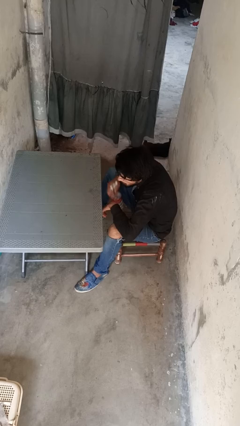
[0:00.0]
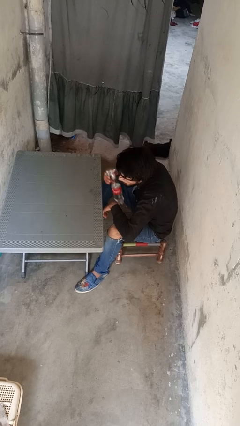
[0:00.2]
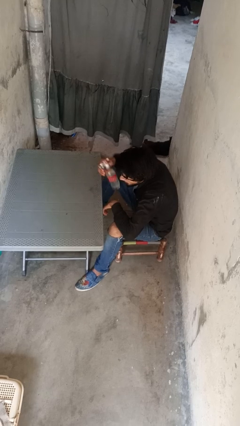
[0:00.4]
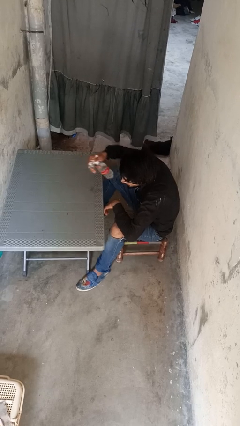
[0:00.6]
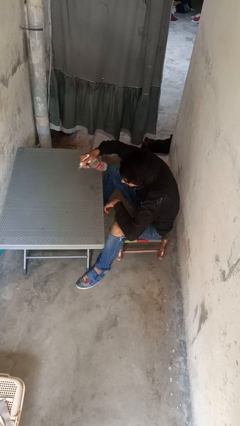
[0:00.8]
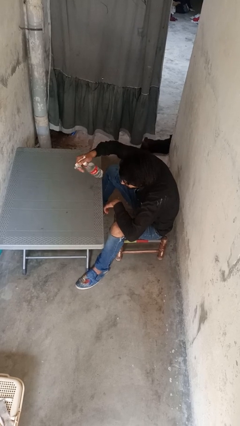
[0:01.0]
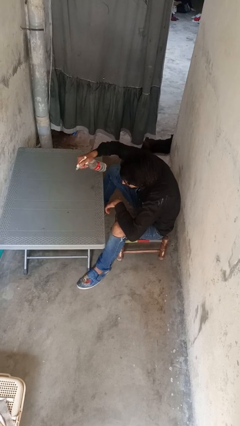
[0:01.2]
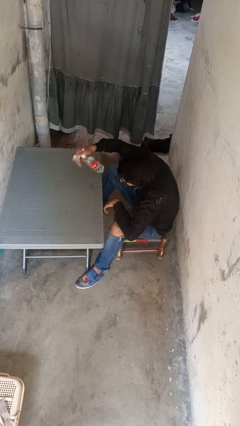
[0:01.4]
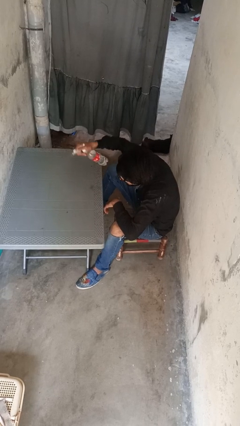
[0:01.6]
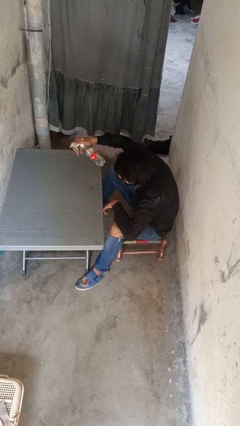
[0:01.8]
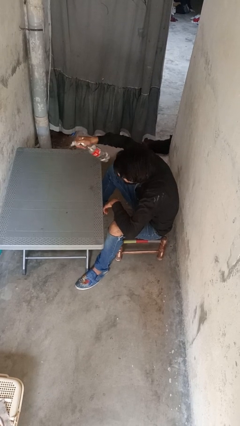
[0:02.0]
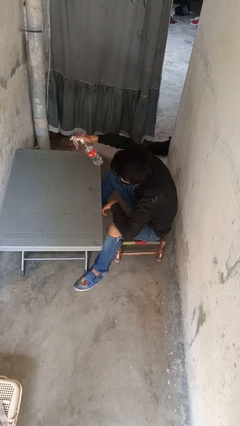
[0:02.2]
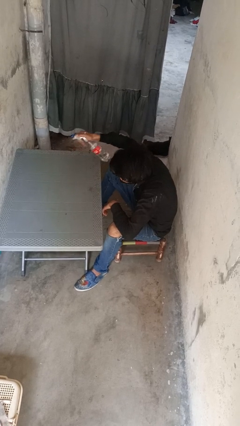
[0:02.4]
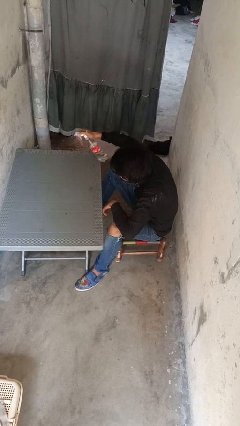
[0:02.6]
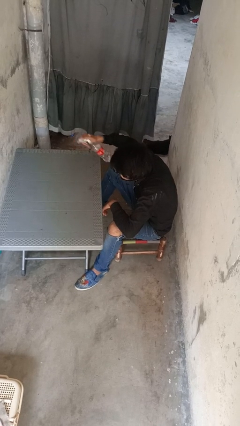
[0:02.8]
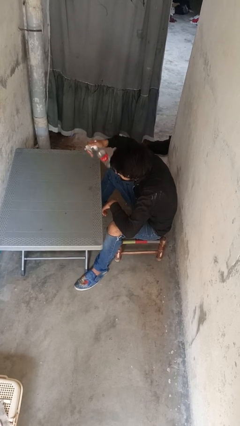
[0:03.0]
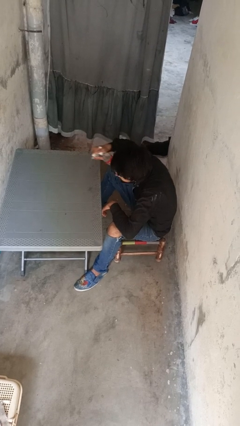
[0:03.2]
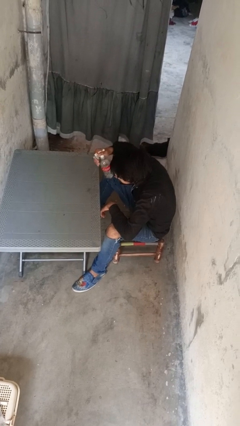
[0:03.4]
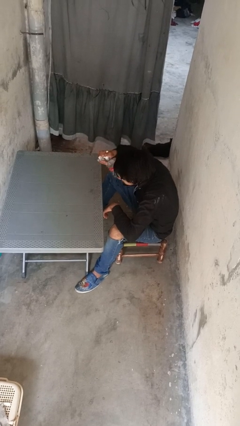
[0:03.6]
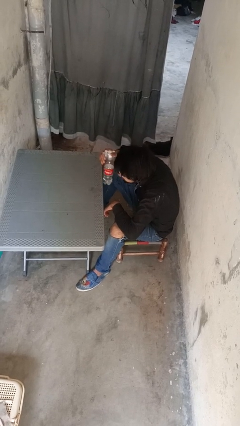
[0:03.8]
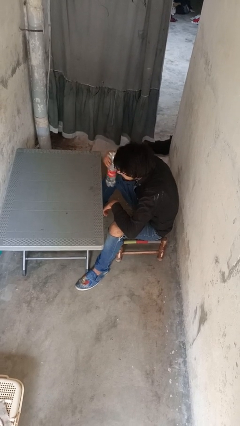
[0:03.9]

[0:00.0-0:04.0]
person sprays from bottle

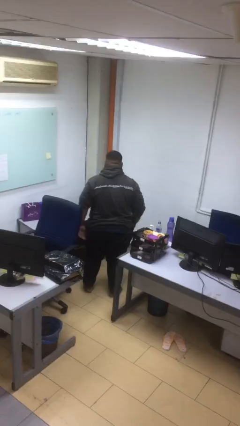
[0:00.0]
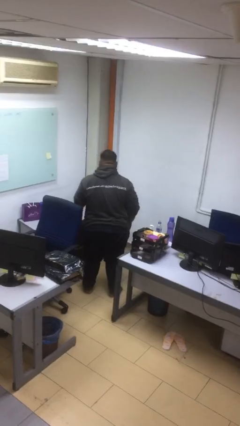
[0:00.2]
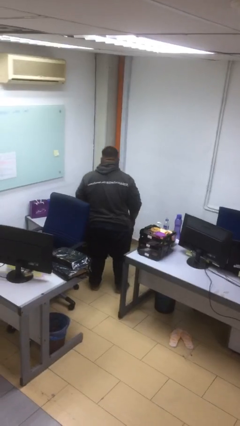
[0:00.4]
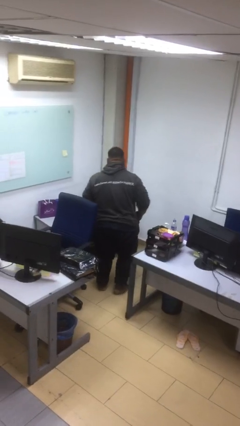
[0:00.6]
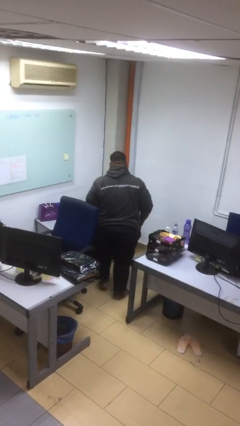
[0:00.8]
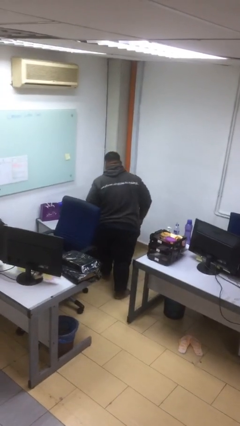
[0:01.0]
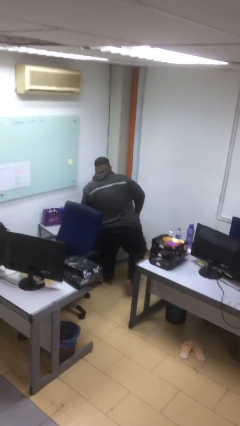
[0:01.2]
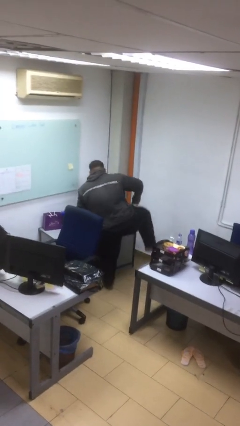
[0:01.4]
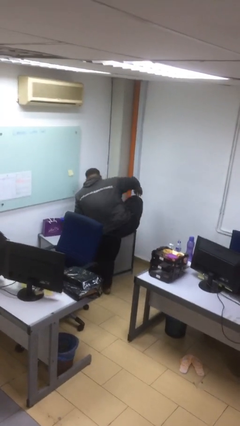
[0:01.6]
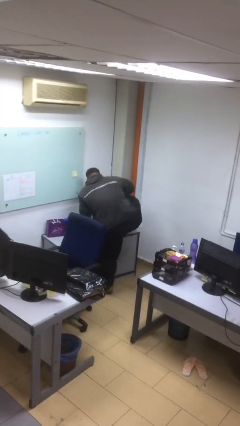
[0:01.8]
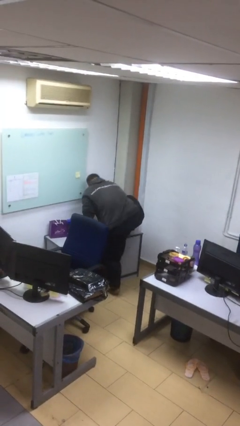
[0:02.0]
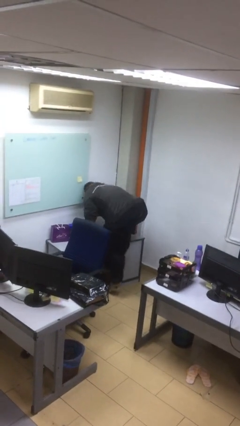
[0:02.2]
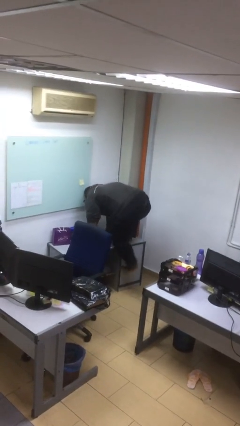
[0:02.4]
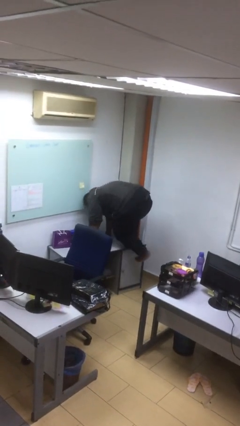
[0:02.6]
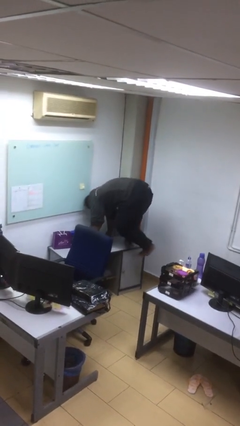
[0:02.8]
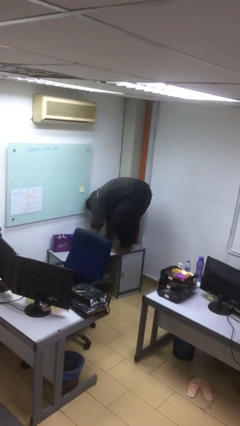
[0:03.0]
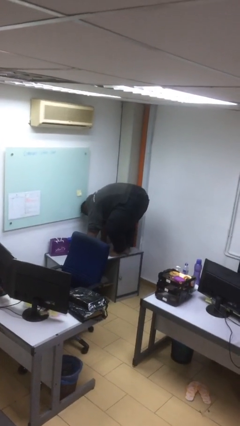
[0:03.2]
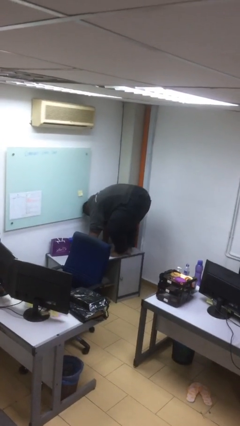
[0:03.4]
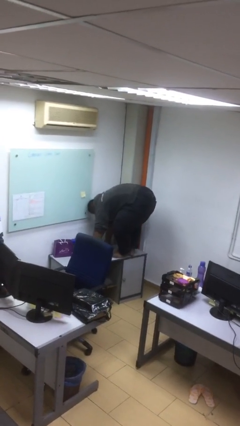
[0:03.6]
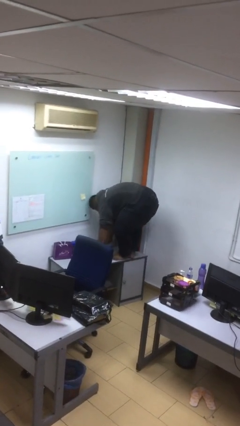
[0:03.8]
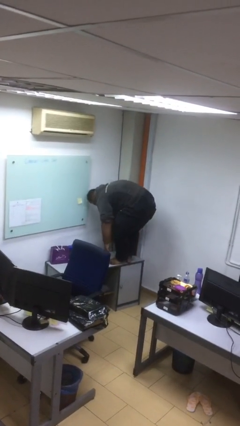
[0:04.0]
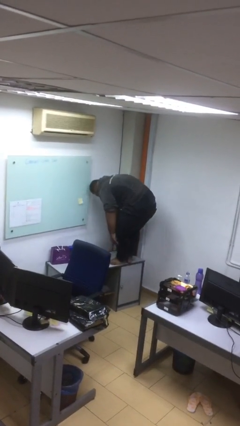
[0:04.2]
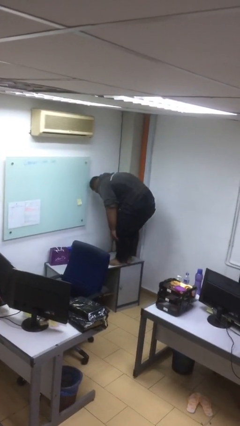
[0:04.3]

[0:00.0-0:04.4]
person climbs on table

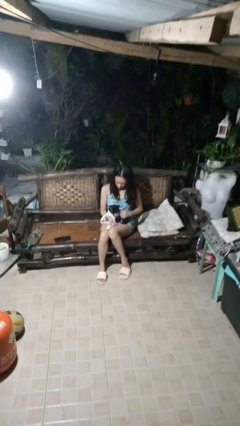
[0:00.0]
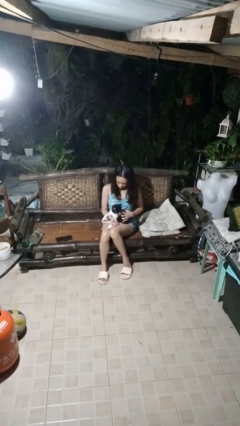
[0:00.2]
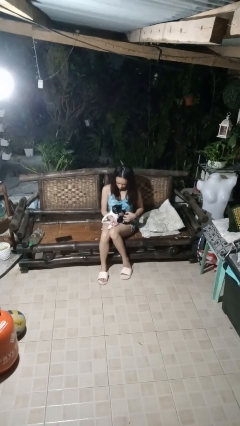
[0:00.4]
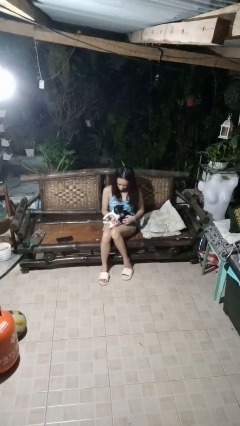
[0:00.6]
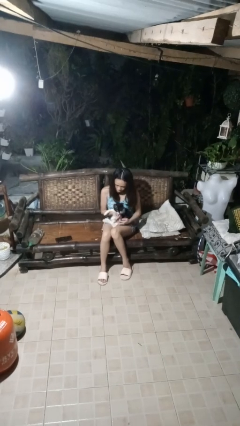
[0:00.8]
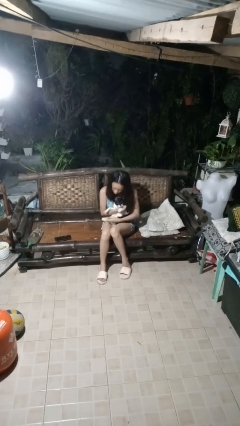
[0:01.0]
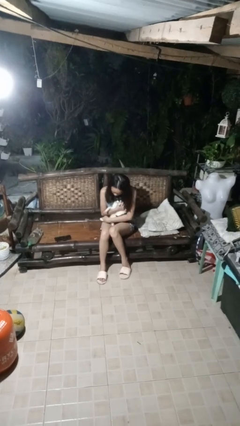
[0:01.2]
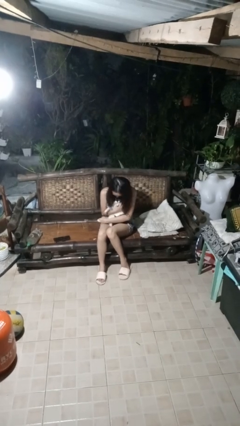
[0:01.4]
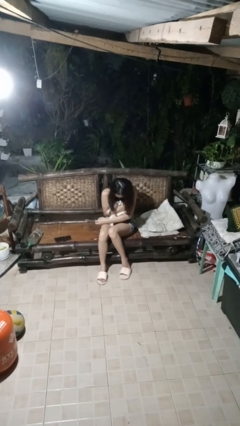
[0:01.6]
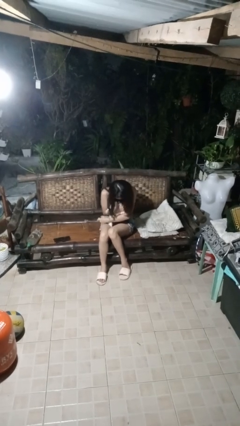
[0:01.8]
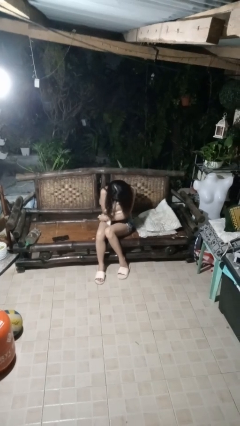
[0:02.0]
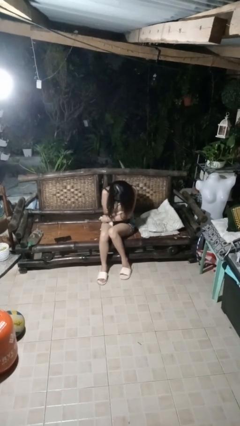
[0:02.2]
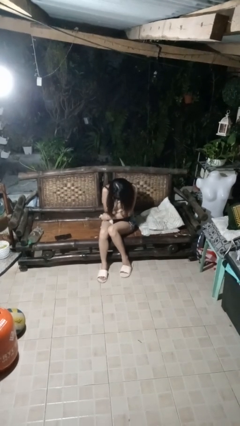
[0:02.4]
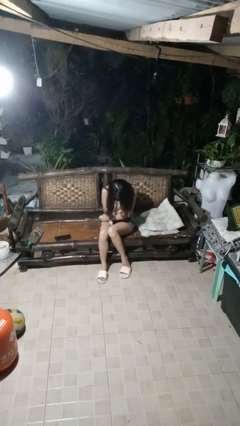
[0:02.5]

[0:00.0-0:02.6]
person hugs cat

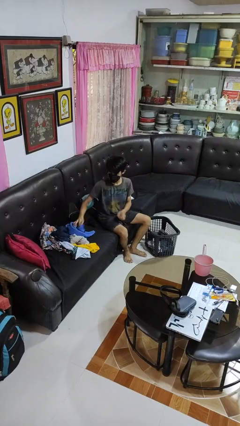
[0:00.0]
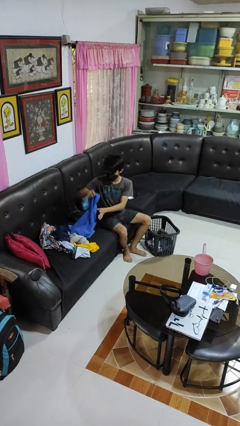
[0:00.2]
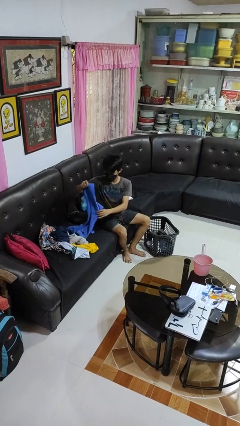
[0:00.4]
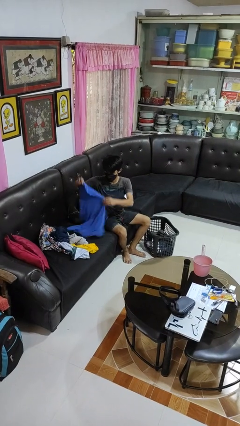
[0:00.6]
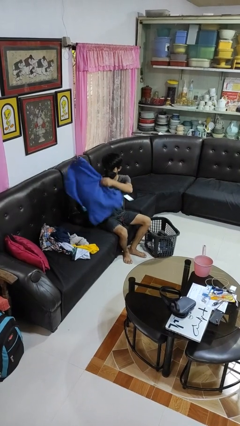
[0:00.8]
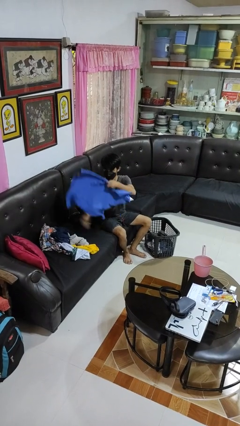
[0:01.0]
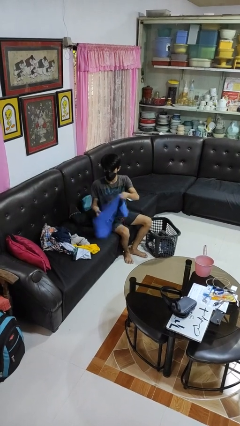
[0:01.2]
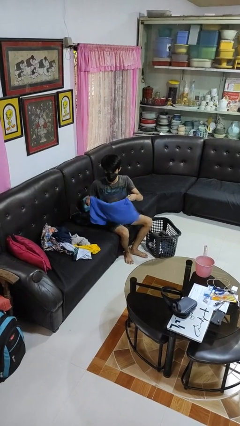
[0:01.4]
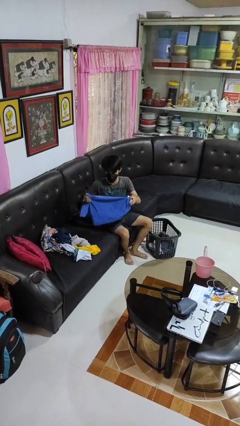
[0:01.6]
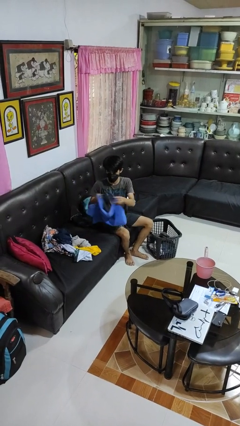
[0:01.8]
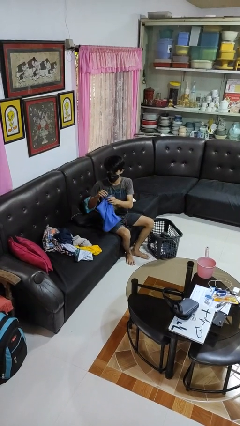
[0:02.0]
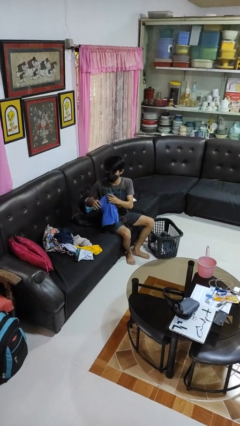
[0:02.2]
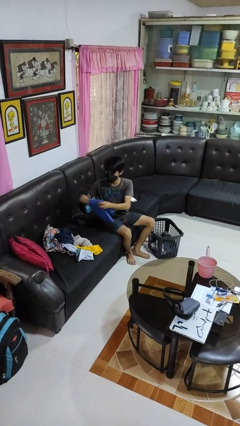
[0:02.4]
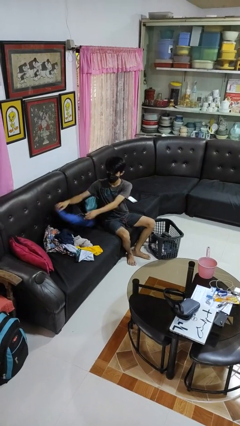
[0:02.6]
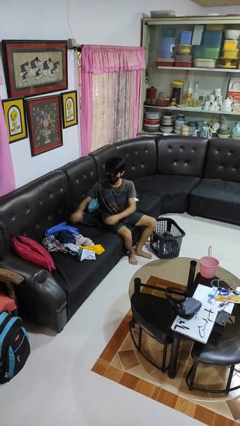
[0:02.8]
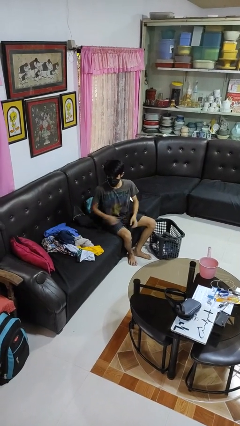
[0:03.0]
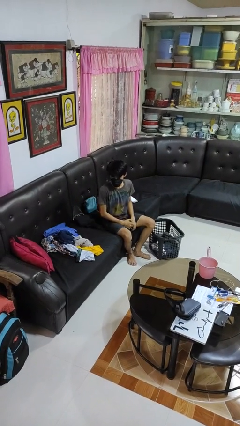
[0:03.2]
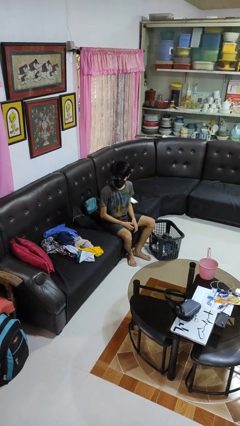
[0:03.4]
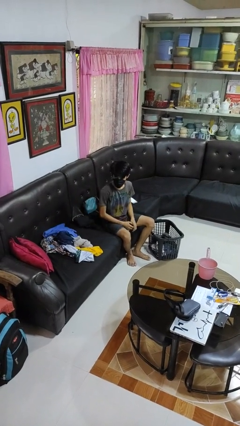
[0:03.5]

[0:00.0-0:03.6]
person folds shirt

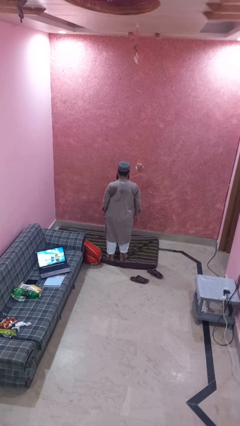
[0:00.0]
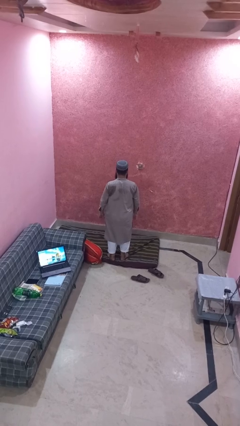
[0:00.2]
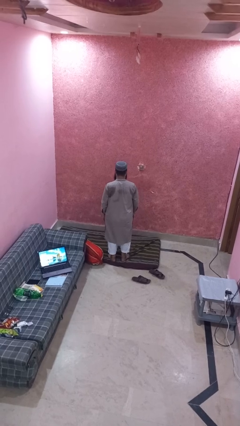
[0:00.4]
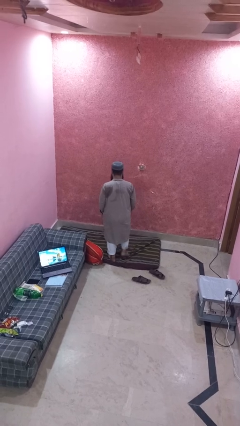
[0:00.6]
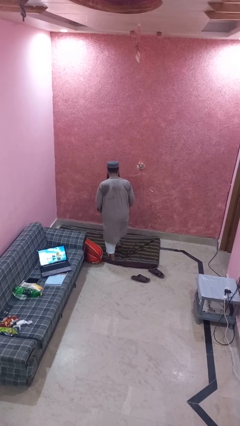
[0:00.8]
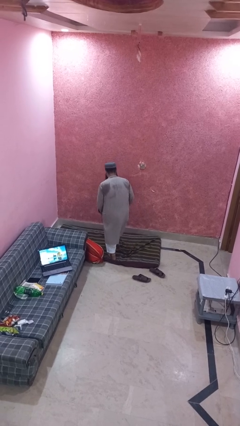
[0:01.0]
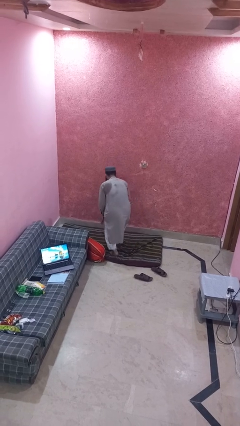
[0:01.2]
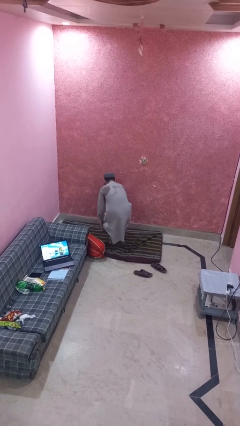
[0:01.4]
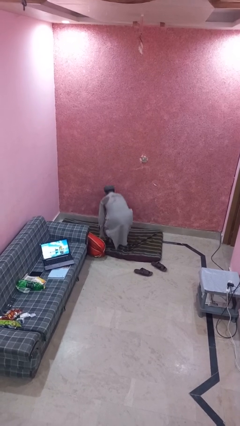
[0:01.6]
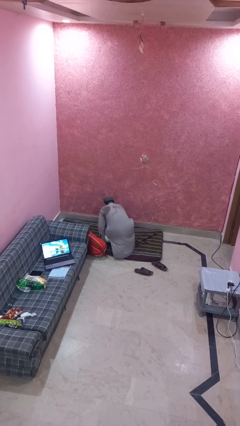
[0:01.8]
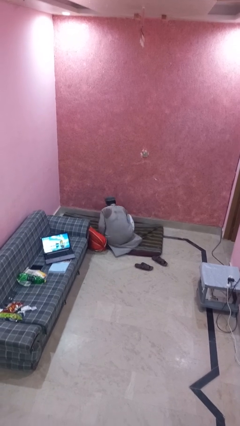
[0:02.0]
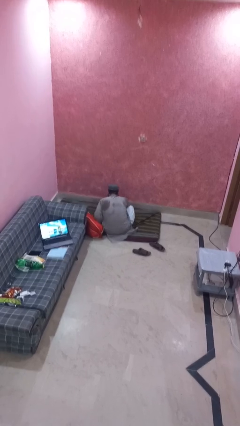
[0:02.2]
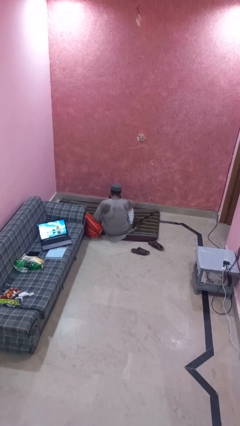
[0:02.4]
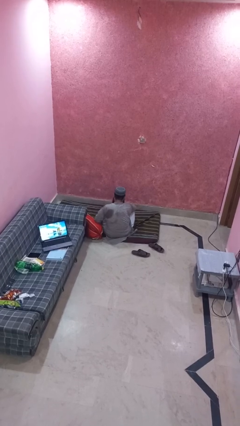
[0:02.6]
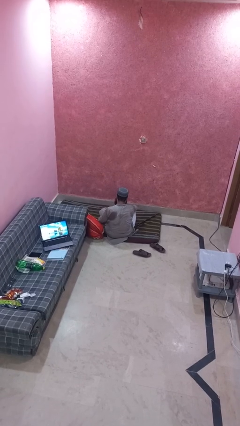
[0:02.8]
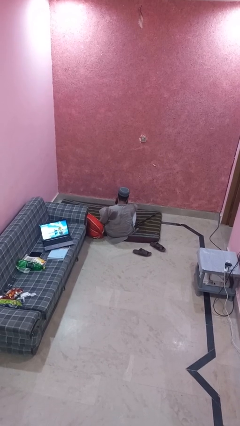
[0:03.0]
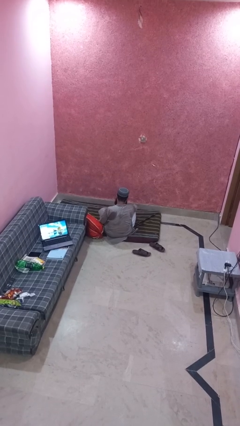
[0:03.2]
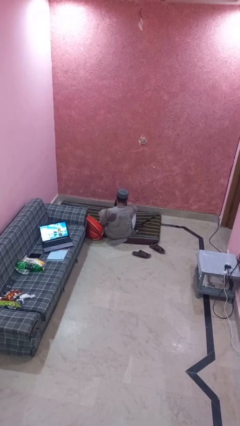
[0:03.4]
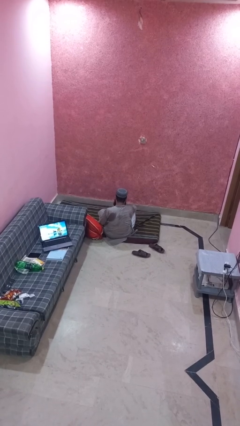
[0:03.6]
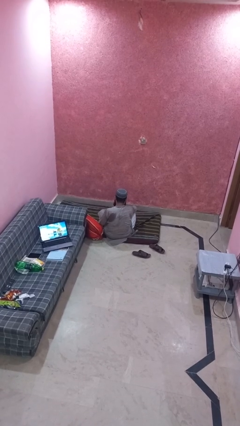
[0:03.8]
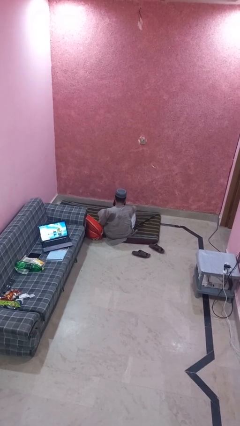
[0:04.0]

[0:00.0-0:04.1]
person sits crisscross
